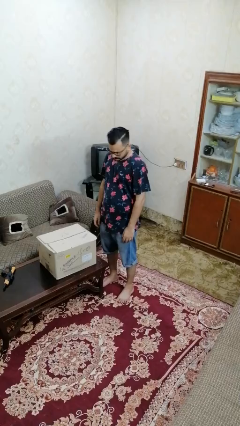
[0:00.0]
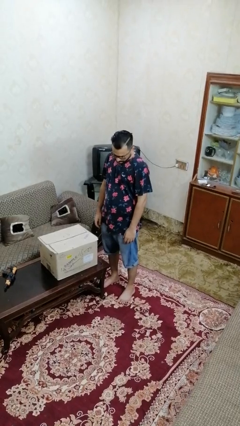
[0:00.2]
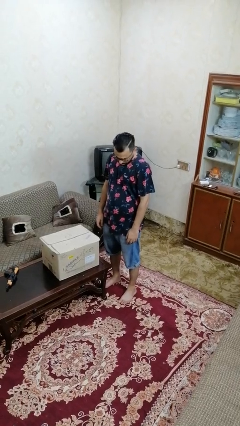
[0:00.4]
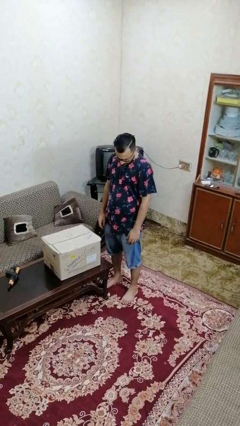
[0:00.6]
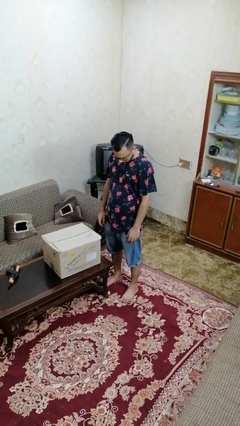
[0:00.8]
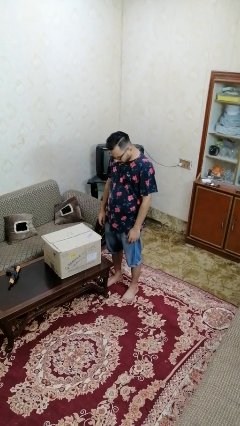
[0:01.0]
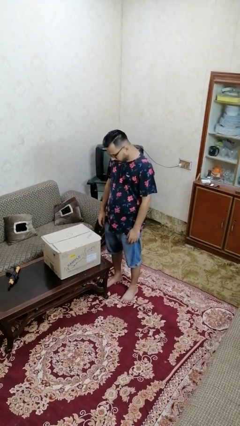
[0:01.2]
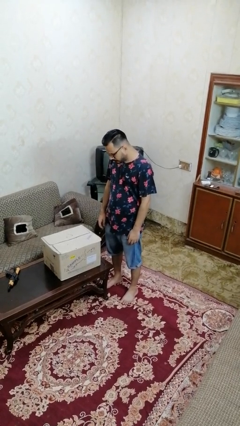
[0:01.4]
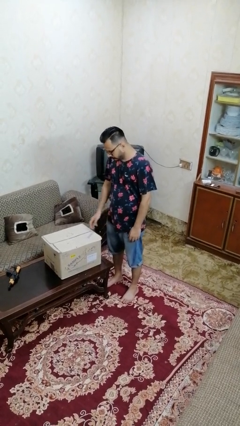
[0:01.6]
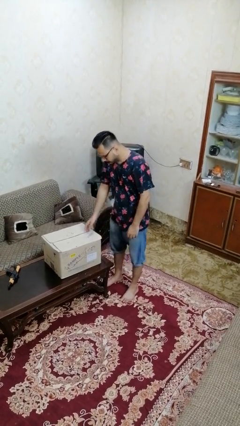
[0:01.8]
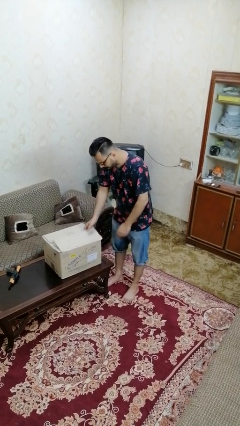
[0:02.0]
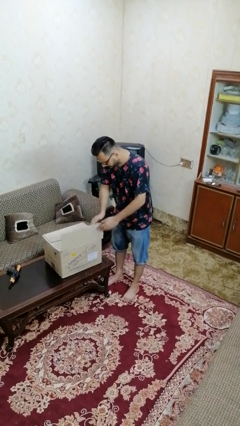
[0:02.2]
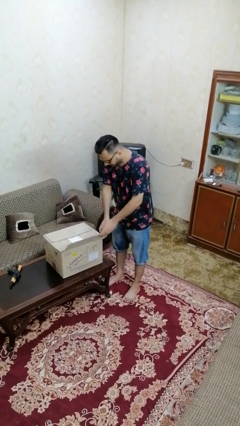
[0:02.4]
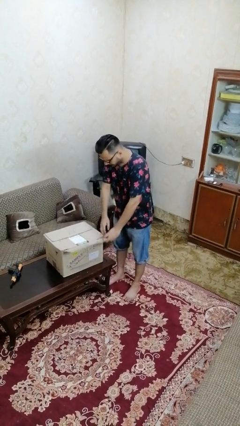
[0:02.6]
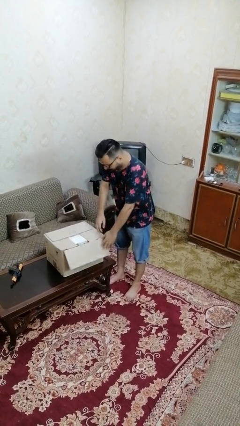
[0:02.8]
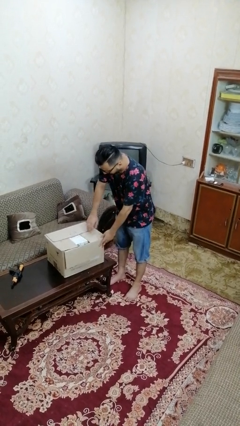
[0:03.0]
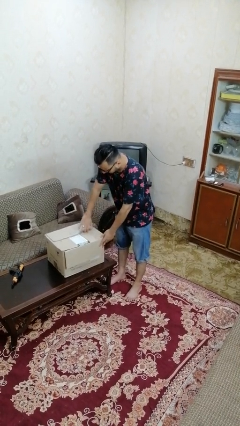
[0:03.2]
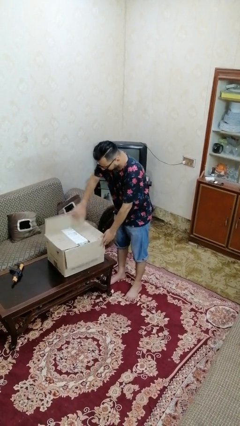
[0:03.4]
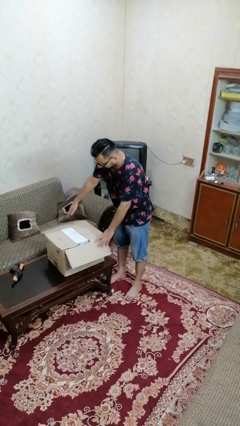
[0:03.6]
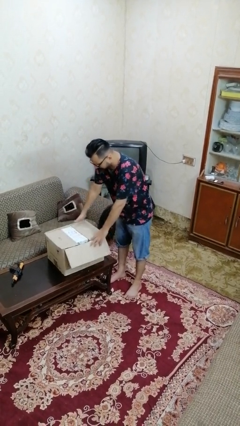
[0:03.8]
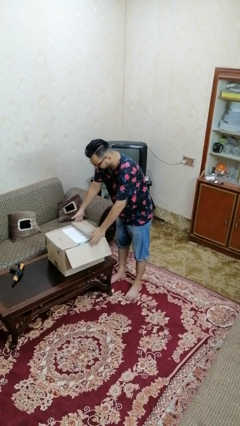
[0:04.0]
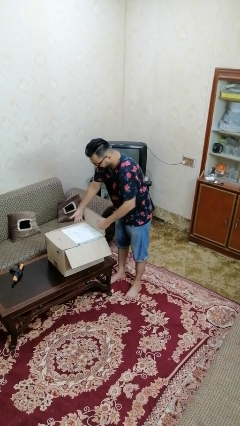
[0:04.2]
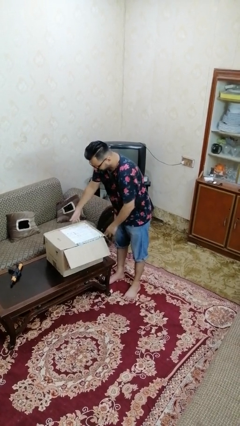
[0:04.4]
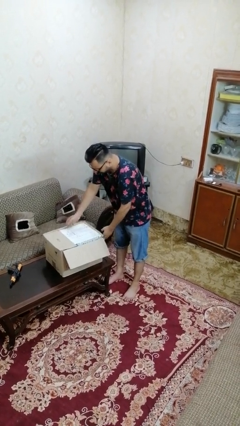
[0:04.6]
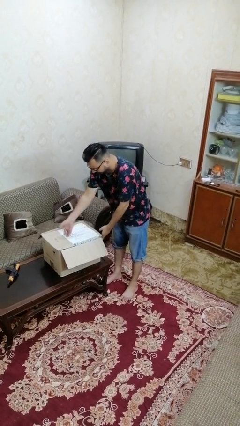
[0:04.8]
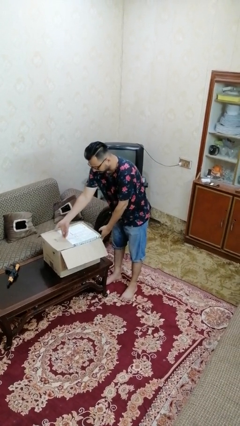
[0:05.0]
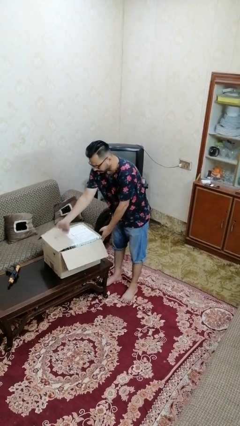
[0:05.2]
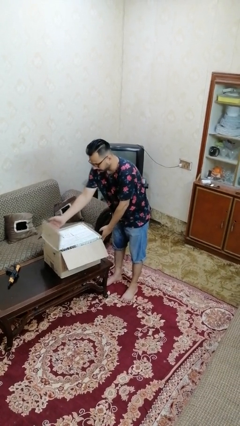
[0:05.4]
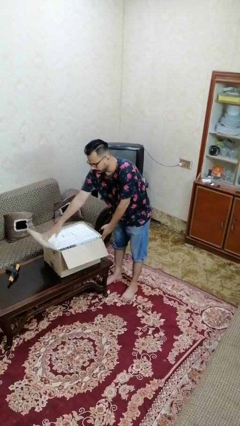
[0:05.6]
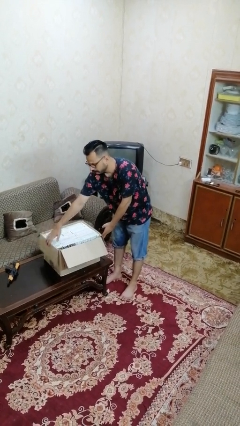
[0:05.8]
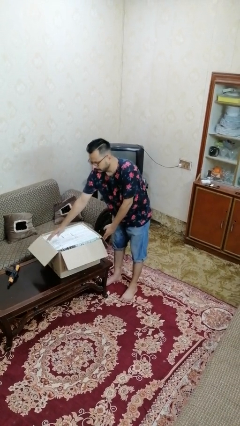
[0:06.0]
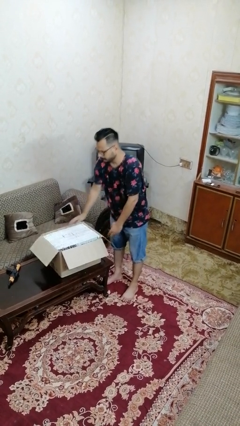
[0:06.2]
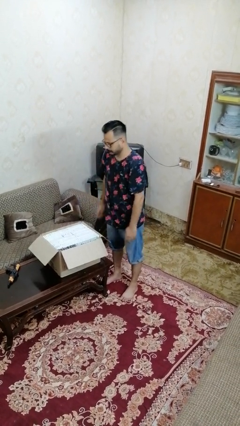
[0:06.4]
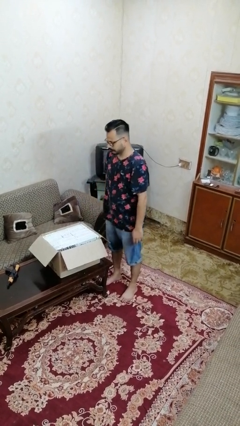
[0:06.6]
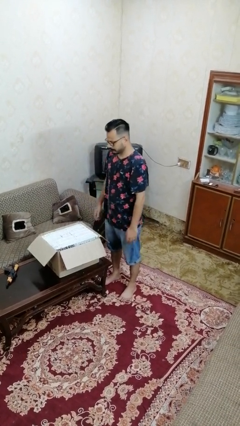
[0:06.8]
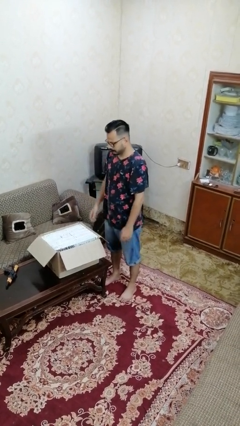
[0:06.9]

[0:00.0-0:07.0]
person opens box

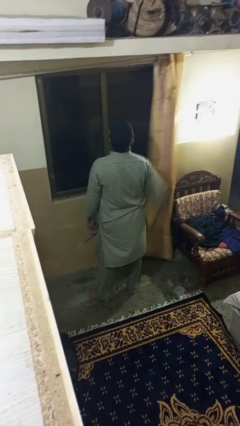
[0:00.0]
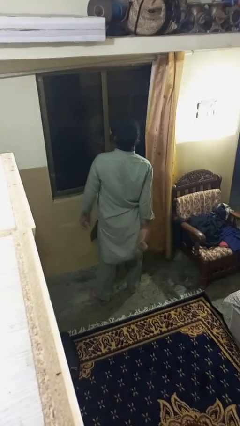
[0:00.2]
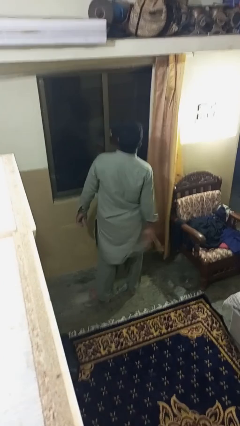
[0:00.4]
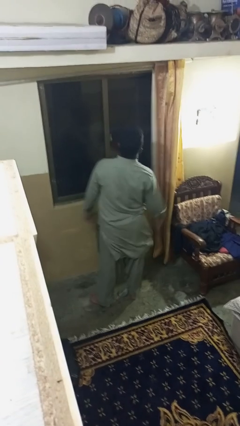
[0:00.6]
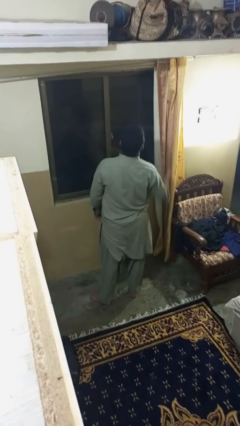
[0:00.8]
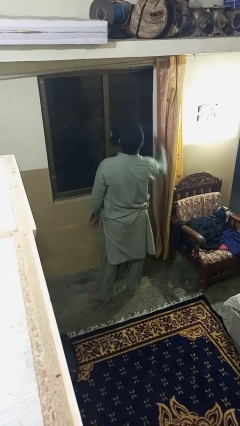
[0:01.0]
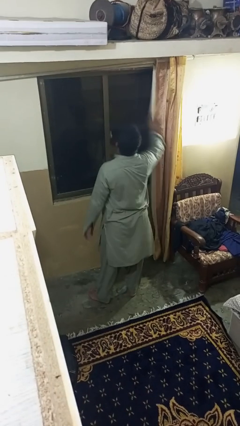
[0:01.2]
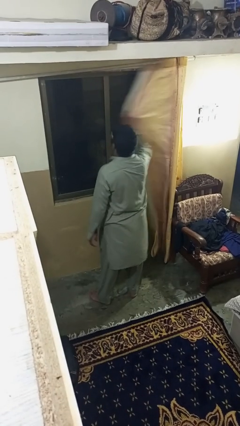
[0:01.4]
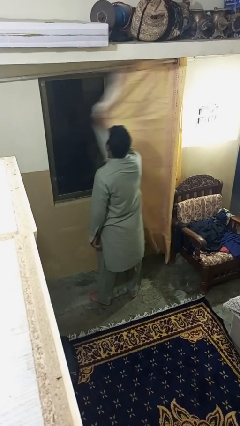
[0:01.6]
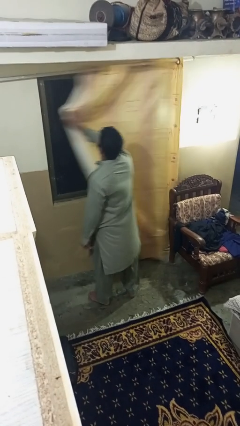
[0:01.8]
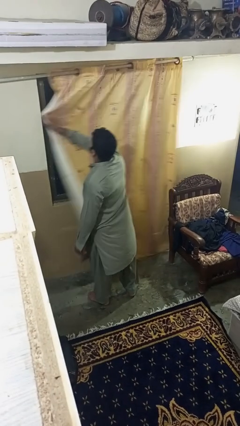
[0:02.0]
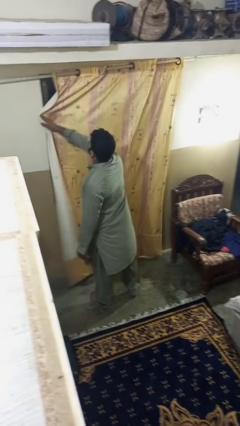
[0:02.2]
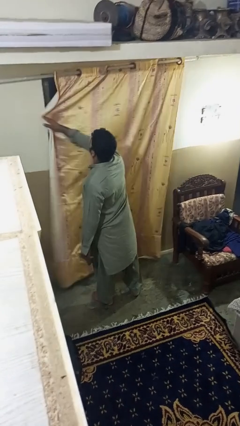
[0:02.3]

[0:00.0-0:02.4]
person closes curtains

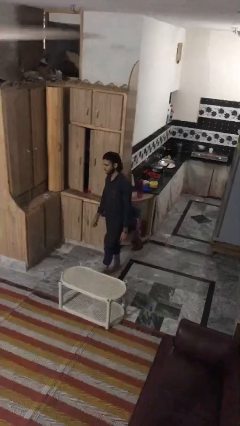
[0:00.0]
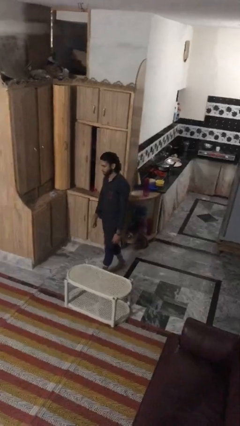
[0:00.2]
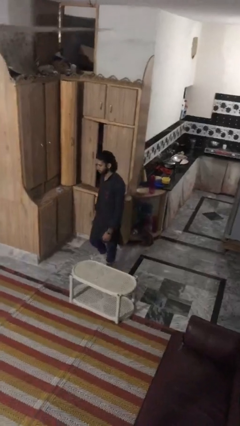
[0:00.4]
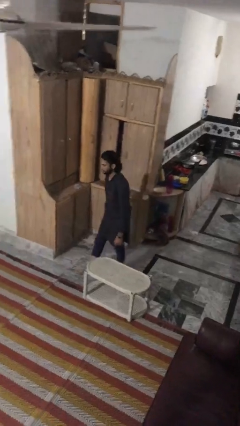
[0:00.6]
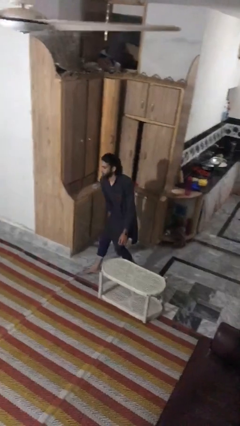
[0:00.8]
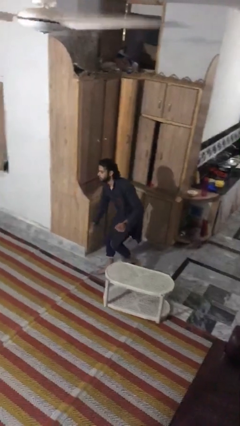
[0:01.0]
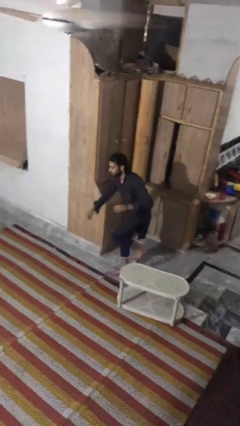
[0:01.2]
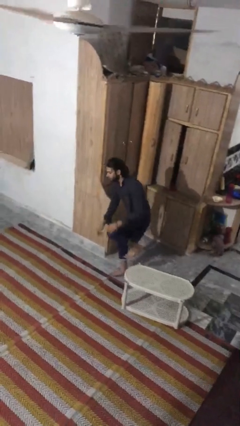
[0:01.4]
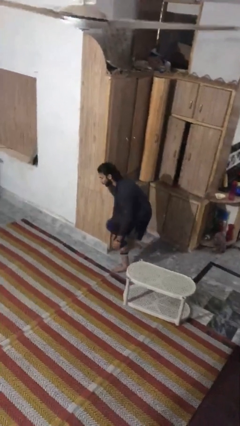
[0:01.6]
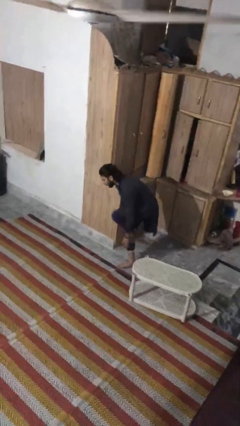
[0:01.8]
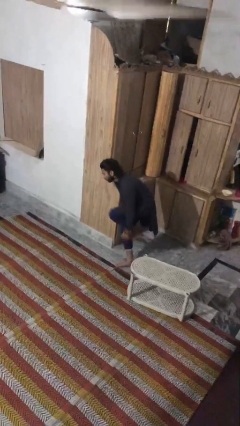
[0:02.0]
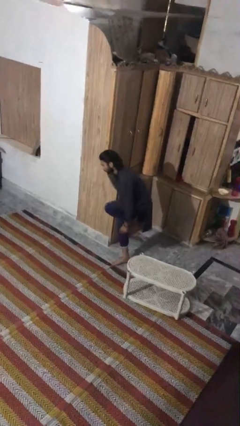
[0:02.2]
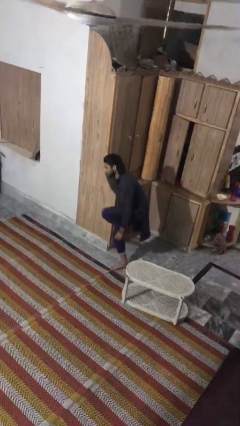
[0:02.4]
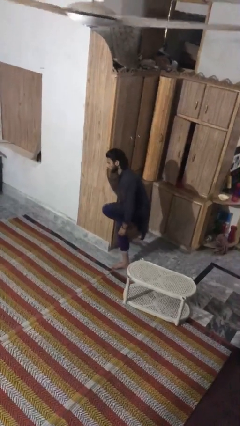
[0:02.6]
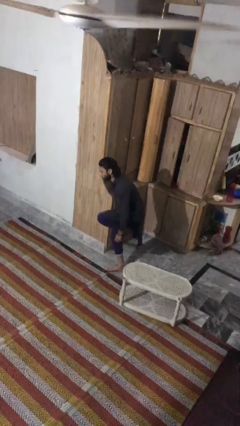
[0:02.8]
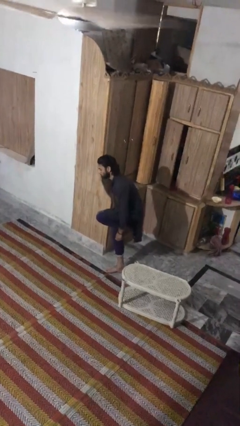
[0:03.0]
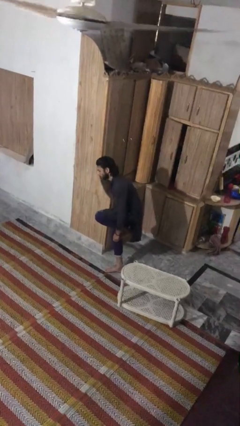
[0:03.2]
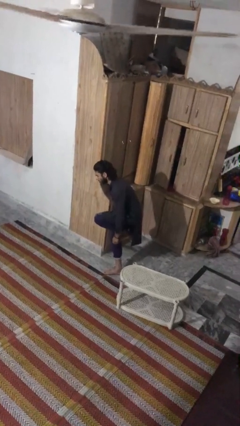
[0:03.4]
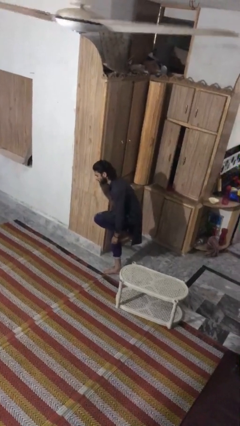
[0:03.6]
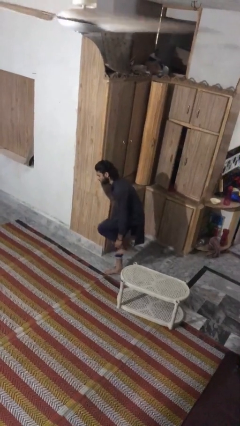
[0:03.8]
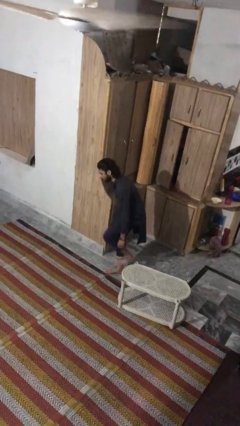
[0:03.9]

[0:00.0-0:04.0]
person bumps into table

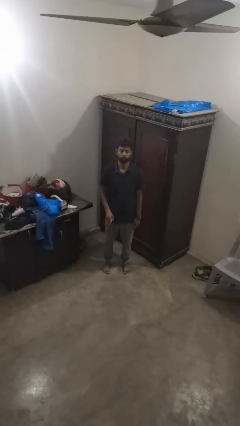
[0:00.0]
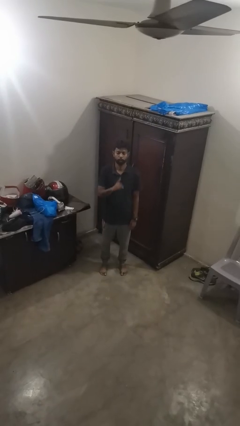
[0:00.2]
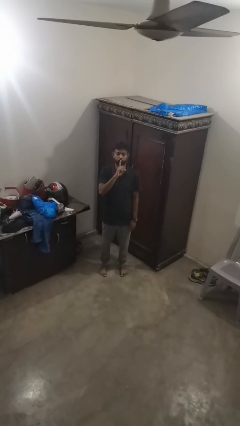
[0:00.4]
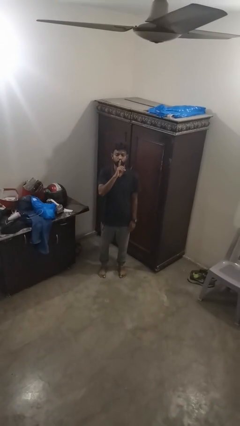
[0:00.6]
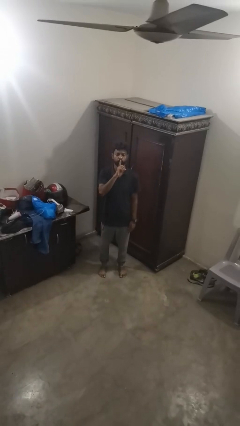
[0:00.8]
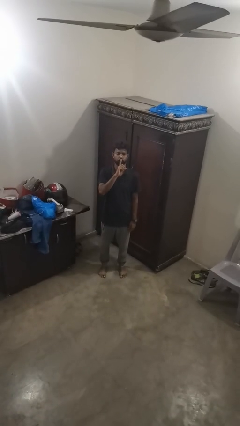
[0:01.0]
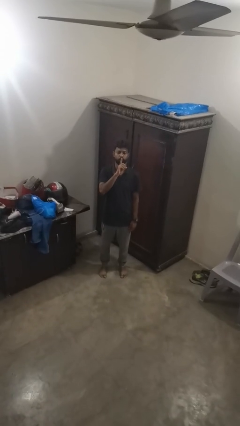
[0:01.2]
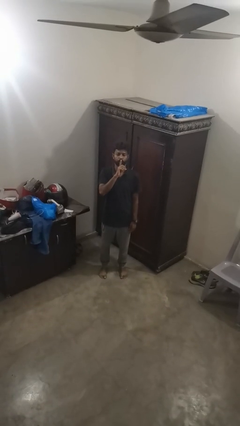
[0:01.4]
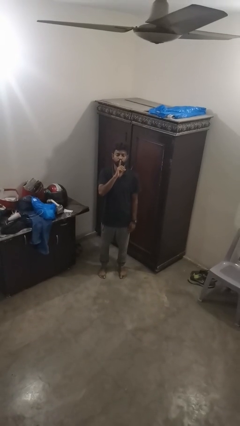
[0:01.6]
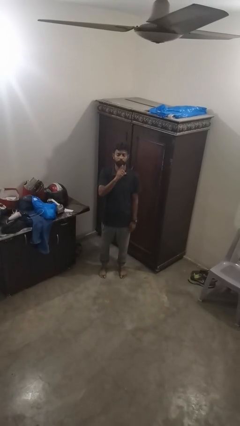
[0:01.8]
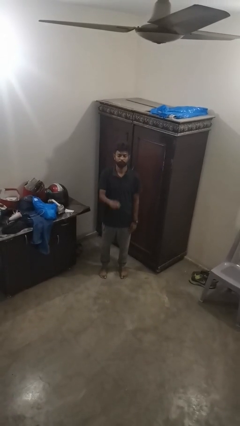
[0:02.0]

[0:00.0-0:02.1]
person gestures be quiet

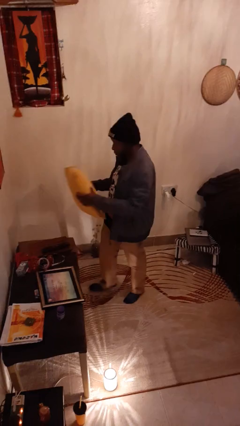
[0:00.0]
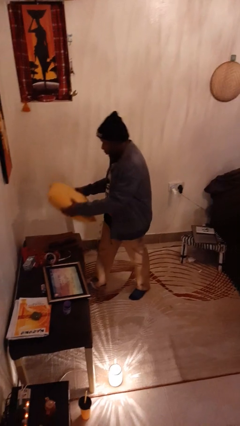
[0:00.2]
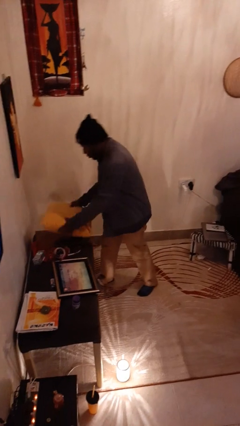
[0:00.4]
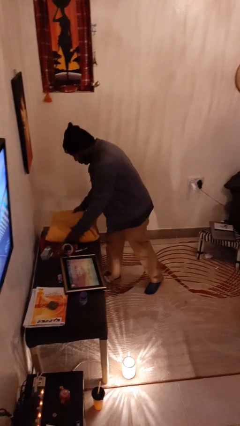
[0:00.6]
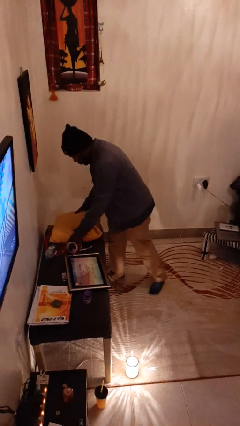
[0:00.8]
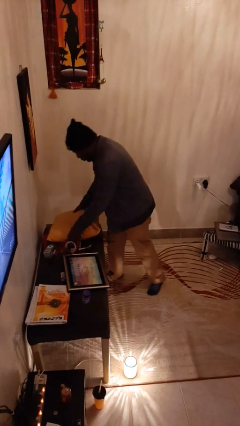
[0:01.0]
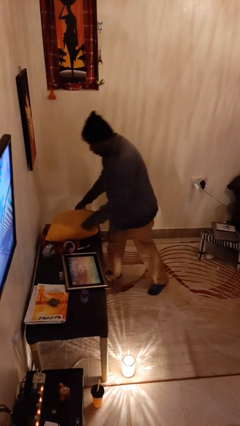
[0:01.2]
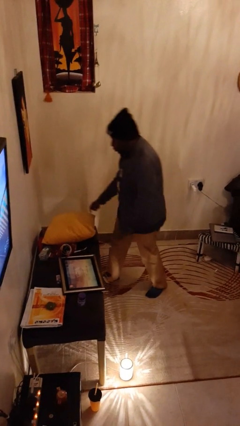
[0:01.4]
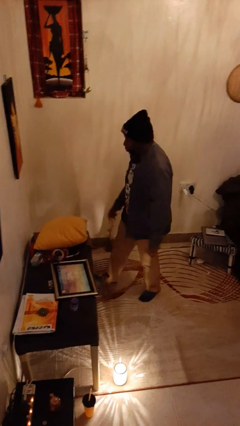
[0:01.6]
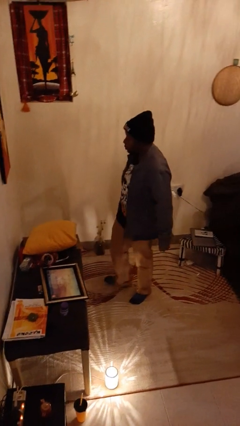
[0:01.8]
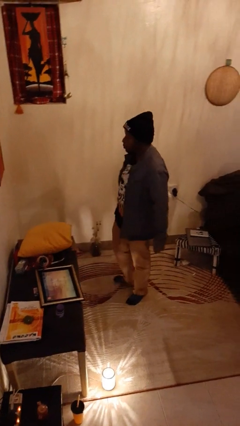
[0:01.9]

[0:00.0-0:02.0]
person puts down object on countertop
